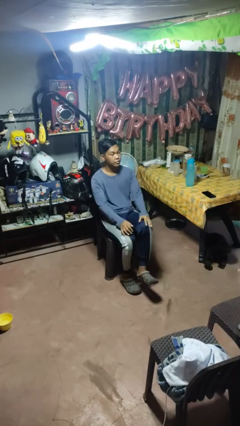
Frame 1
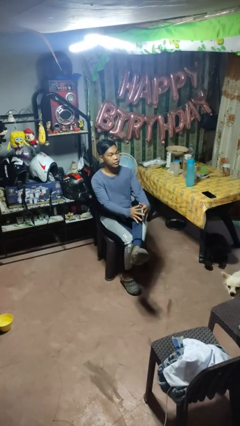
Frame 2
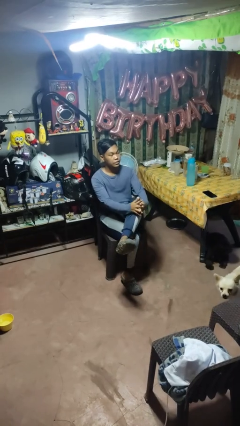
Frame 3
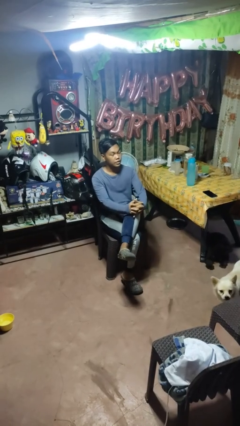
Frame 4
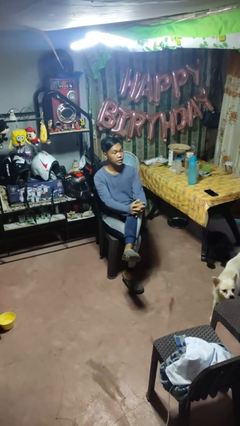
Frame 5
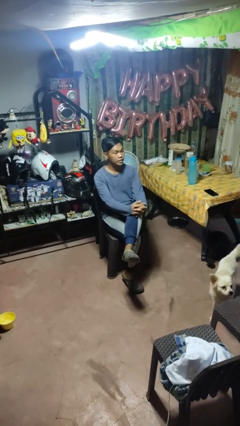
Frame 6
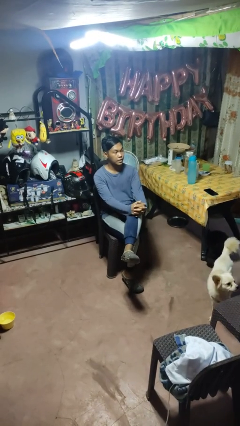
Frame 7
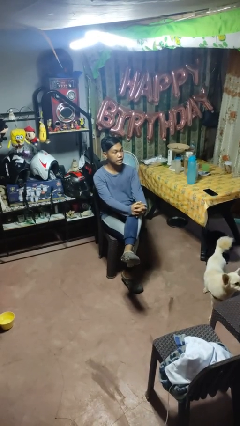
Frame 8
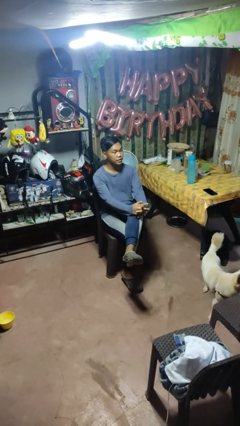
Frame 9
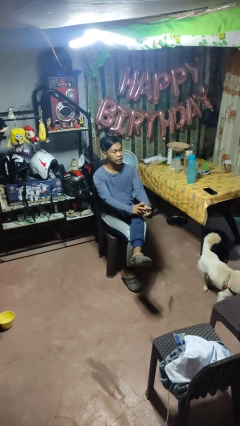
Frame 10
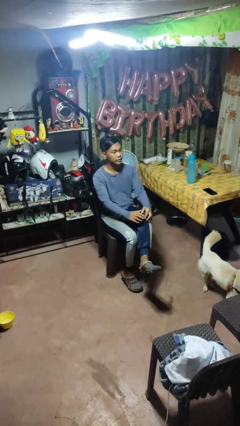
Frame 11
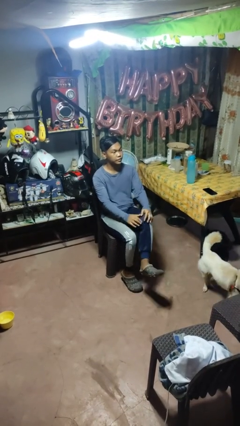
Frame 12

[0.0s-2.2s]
person crosses legs

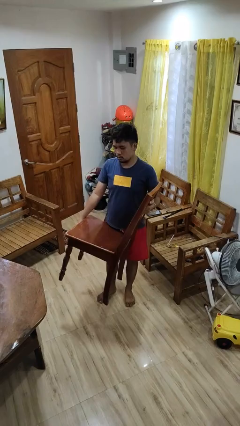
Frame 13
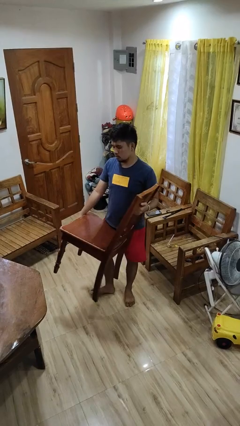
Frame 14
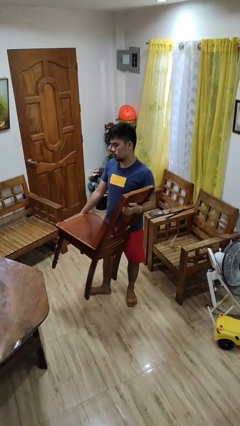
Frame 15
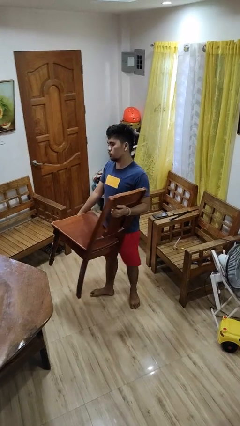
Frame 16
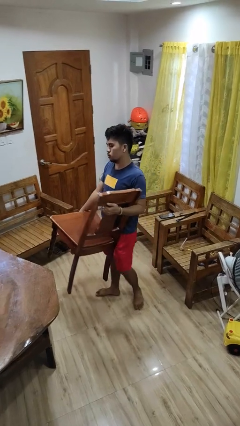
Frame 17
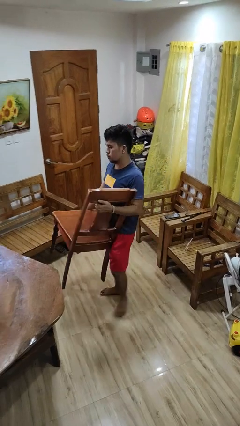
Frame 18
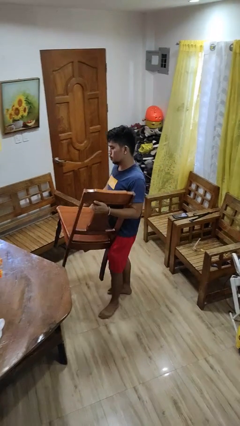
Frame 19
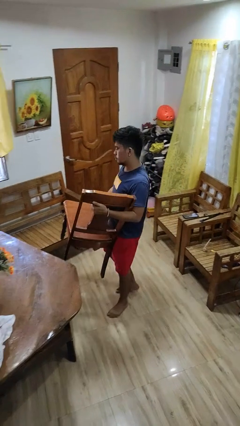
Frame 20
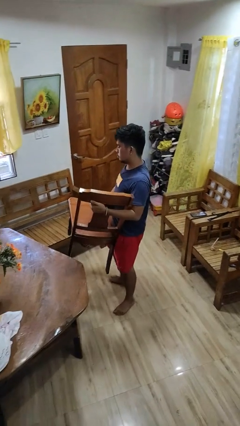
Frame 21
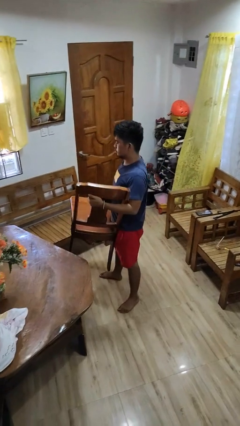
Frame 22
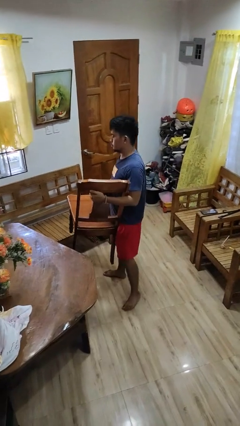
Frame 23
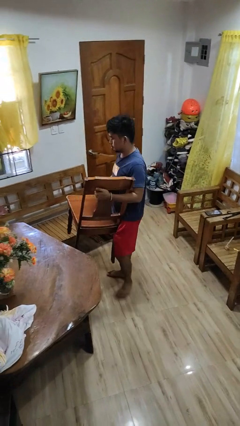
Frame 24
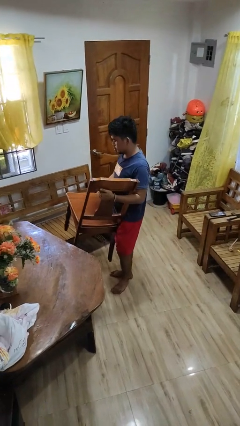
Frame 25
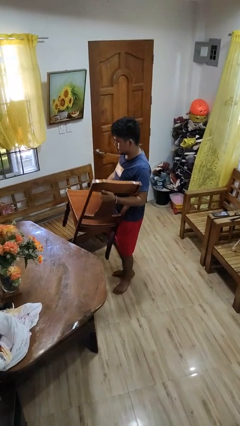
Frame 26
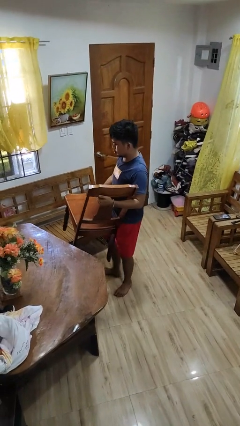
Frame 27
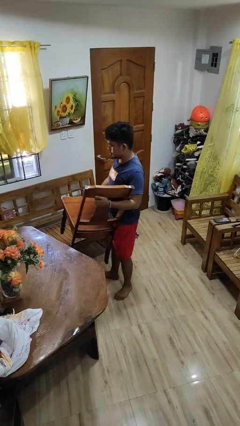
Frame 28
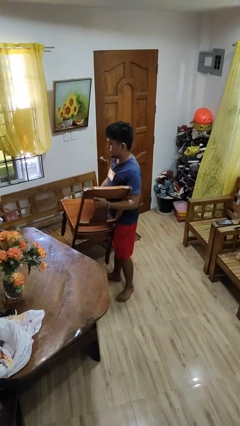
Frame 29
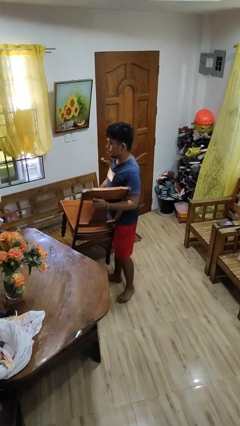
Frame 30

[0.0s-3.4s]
person carries furniture

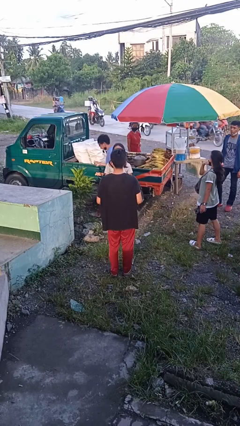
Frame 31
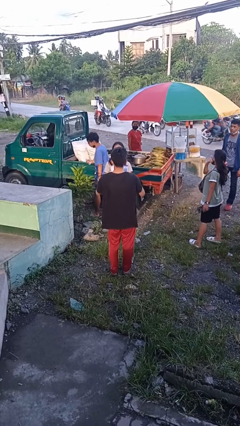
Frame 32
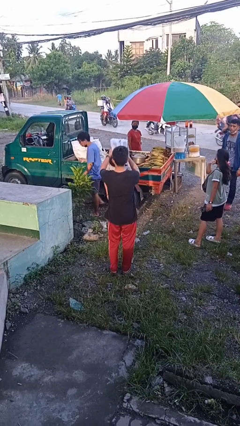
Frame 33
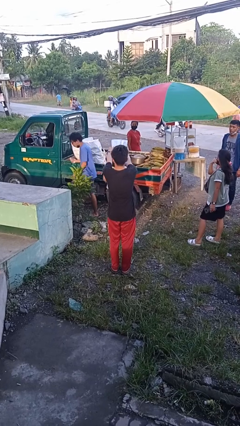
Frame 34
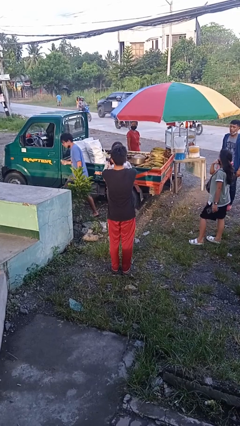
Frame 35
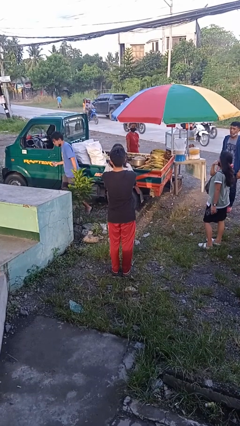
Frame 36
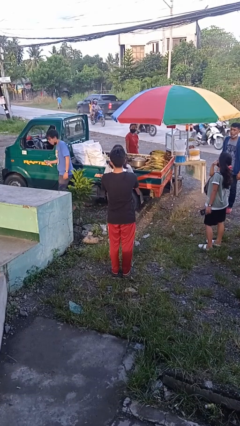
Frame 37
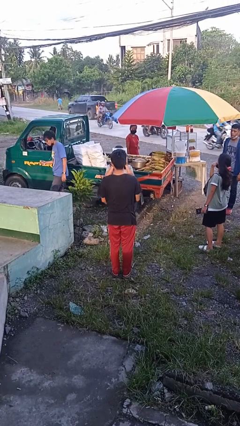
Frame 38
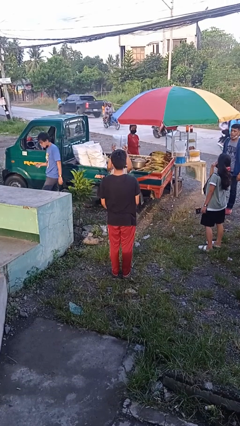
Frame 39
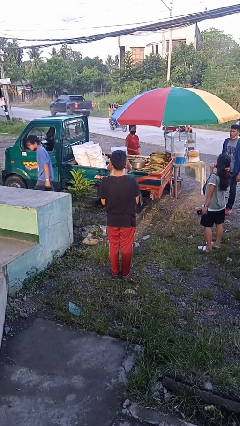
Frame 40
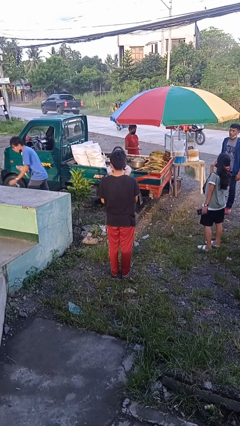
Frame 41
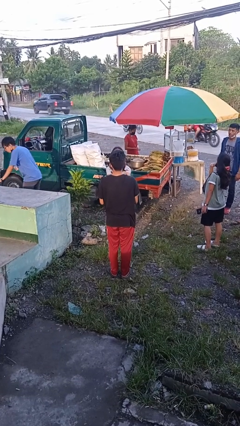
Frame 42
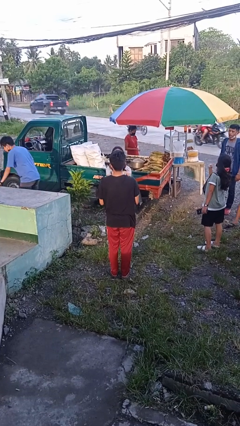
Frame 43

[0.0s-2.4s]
person transfers object to person

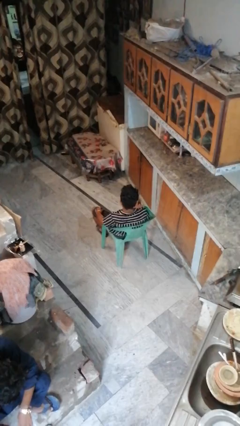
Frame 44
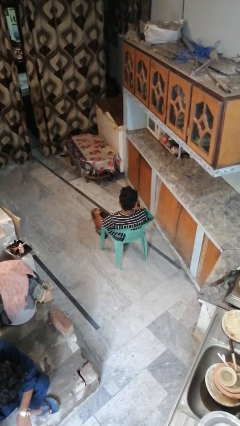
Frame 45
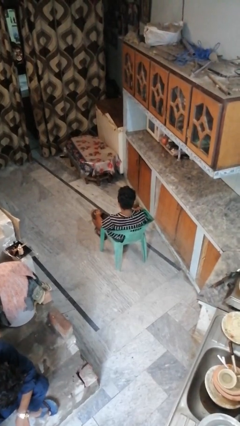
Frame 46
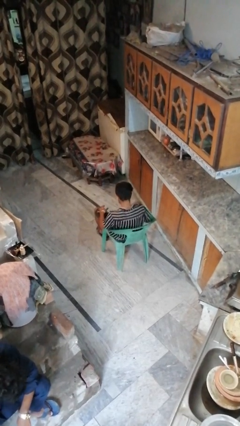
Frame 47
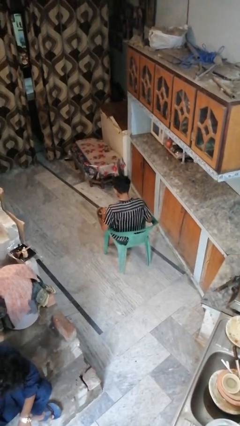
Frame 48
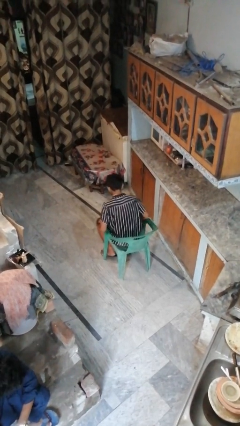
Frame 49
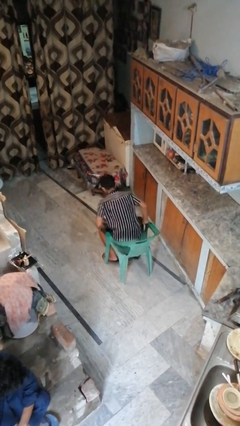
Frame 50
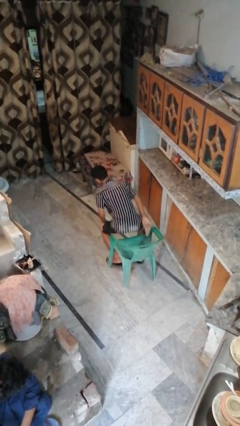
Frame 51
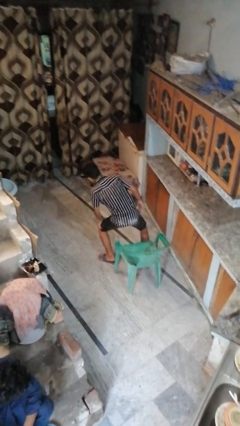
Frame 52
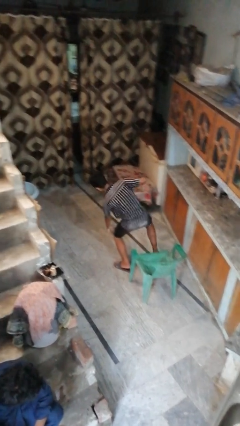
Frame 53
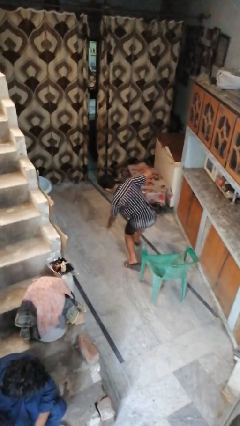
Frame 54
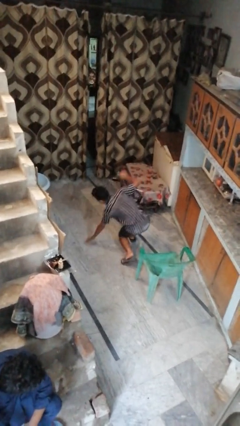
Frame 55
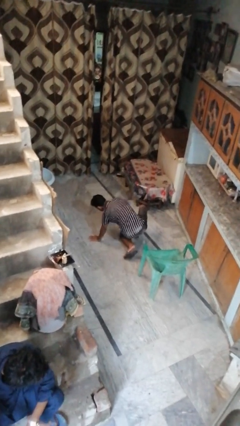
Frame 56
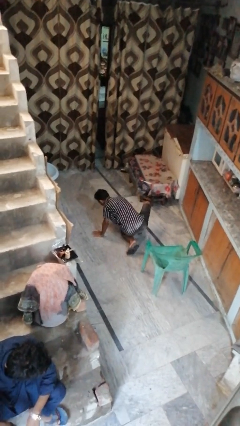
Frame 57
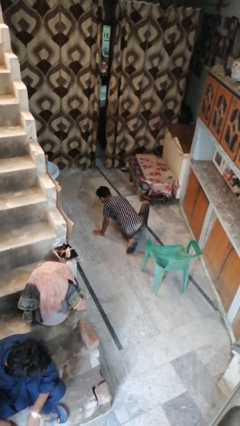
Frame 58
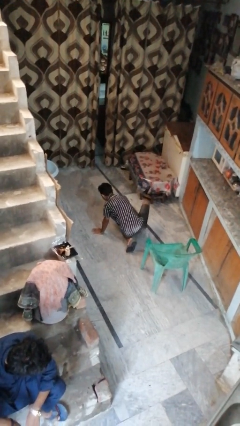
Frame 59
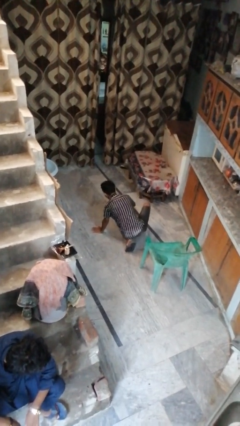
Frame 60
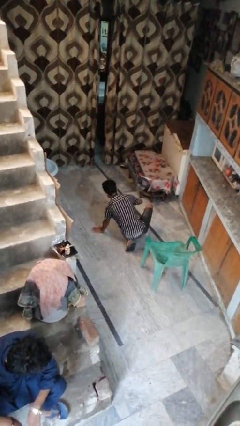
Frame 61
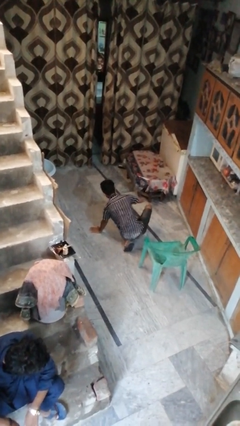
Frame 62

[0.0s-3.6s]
person falls from chair

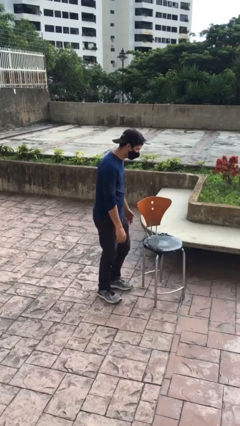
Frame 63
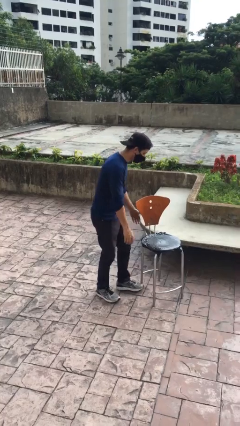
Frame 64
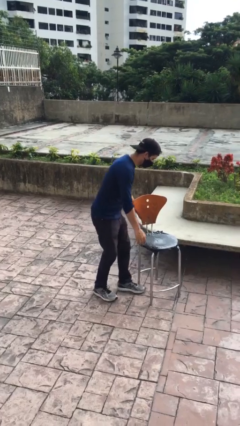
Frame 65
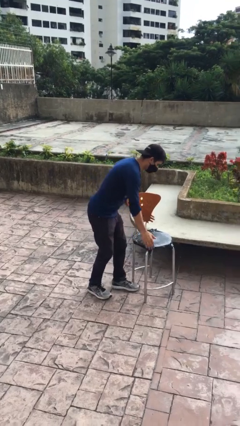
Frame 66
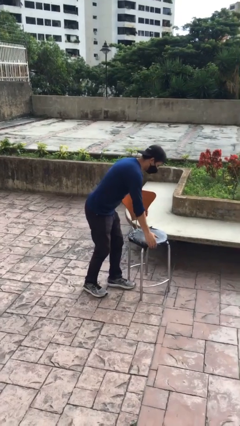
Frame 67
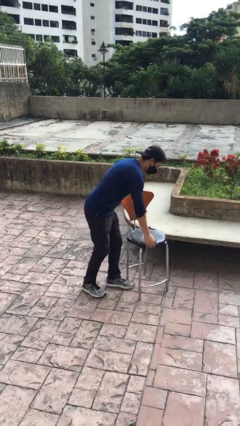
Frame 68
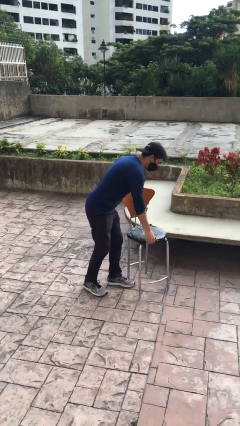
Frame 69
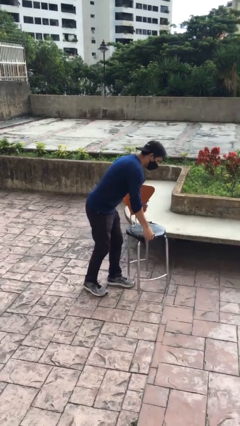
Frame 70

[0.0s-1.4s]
person picks up object from floor

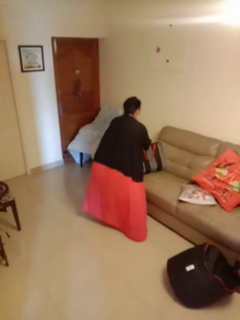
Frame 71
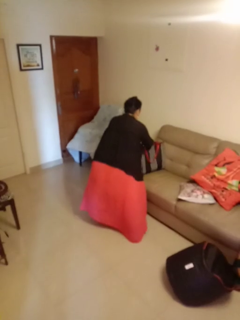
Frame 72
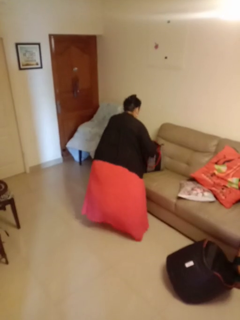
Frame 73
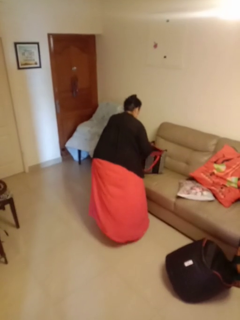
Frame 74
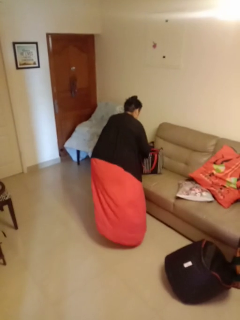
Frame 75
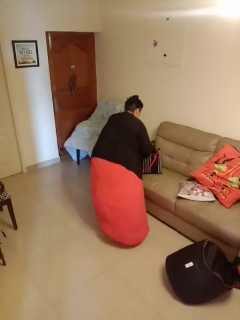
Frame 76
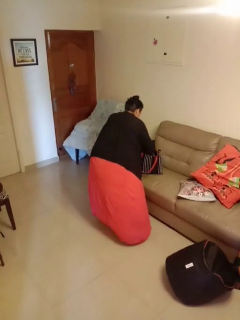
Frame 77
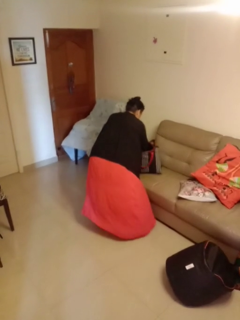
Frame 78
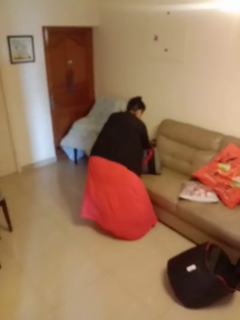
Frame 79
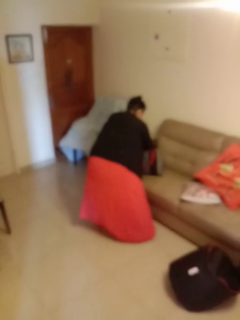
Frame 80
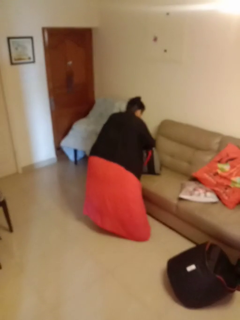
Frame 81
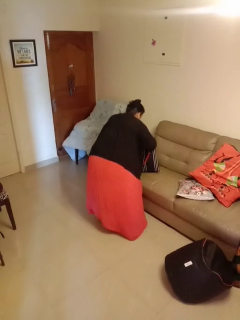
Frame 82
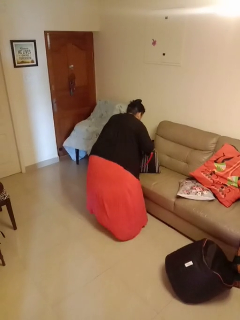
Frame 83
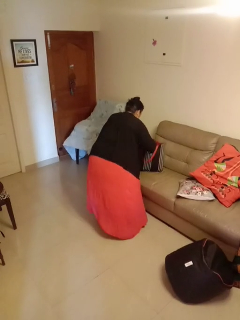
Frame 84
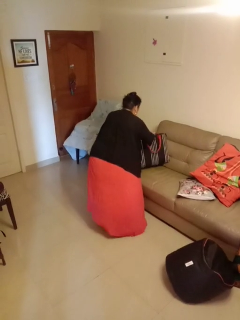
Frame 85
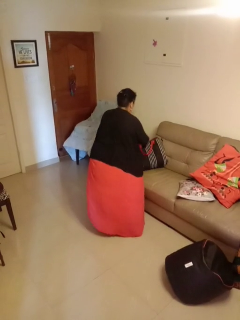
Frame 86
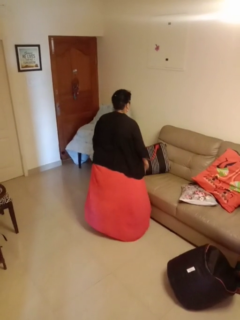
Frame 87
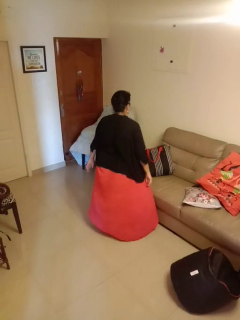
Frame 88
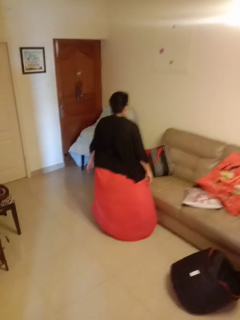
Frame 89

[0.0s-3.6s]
person searches in bag

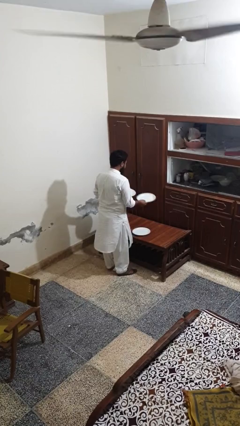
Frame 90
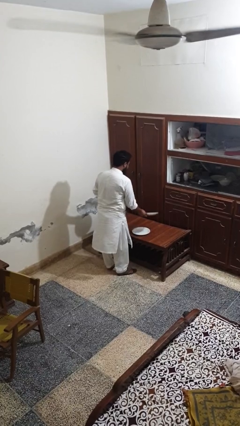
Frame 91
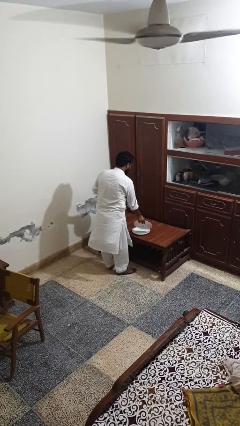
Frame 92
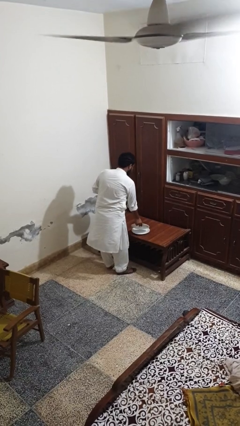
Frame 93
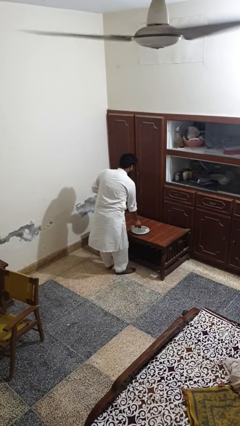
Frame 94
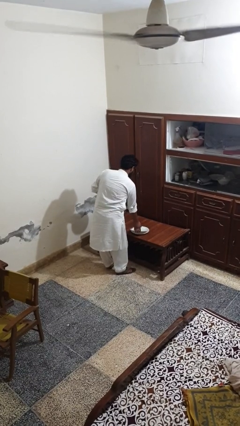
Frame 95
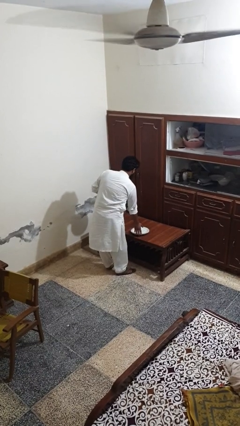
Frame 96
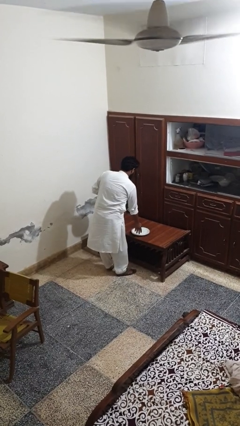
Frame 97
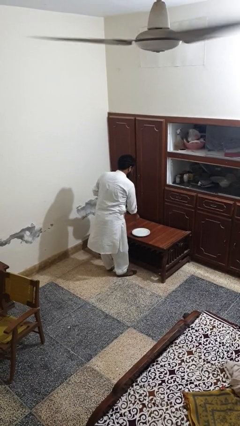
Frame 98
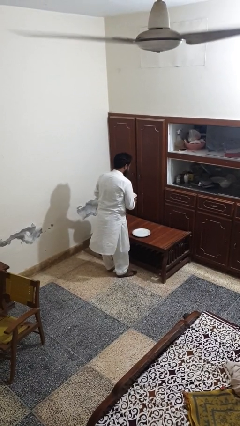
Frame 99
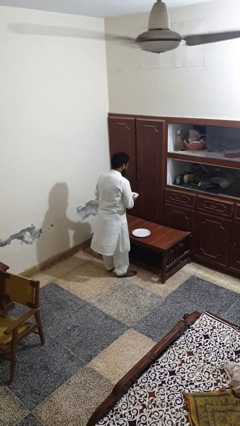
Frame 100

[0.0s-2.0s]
person sets table
